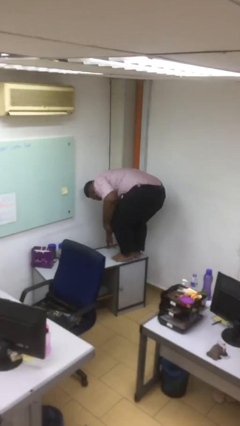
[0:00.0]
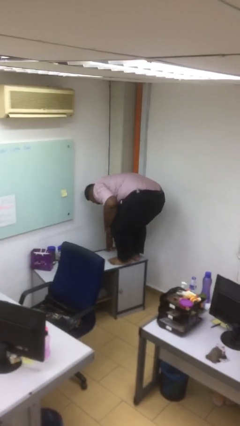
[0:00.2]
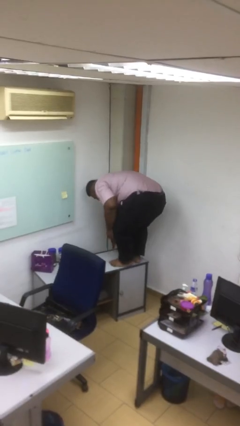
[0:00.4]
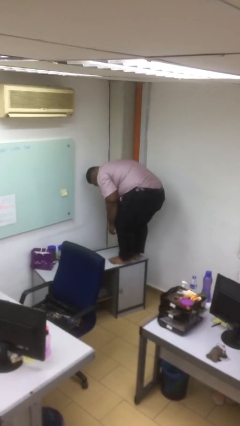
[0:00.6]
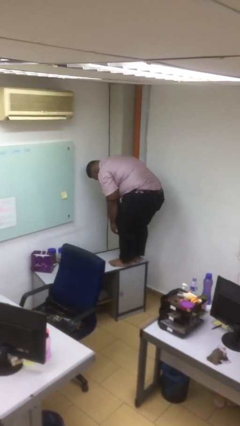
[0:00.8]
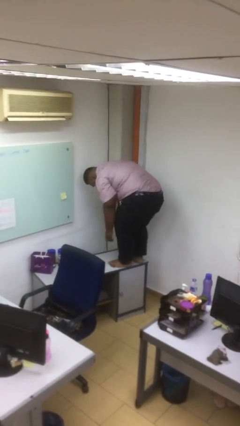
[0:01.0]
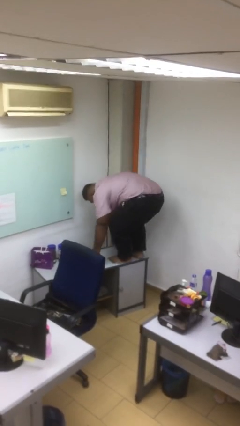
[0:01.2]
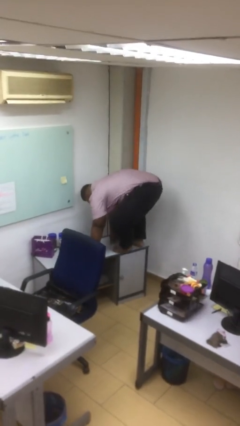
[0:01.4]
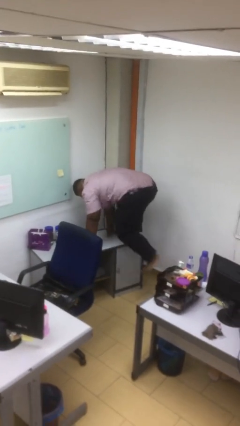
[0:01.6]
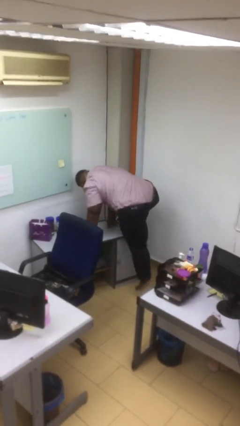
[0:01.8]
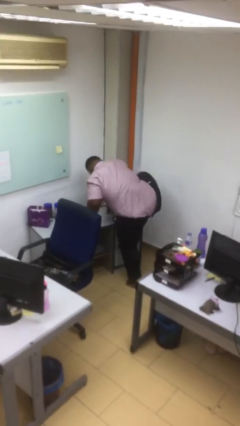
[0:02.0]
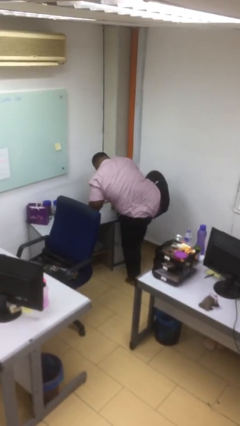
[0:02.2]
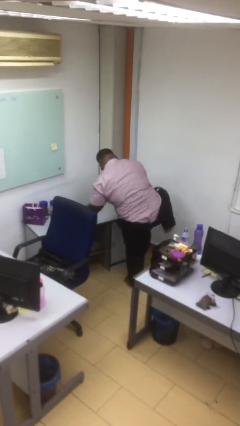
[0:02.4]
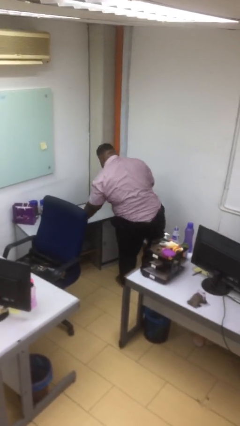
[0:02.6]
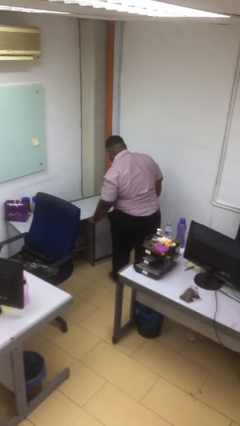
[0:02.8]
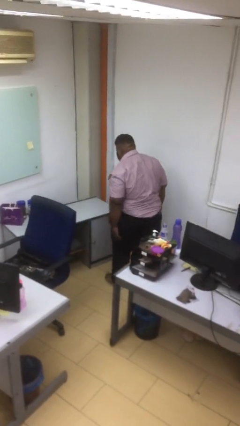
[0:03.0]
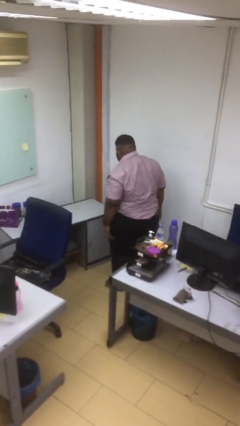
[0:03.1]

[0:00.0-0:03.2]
person climbs off table

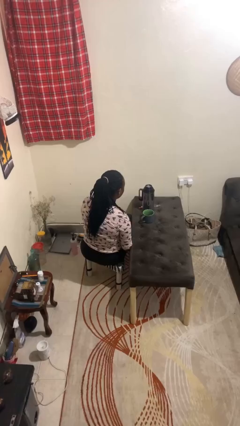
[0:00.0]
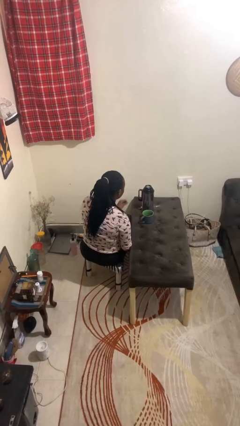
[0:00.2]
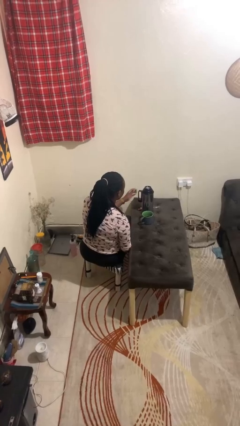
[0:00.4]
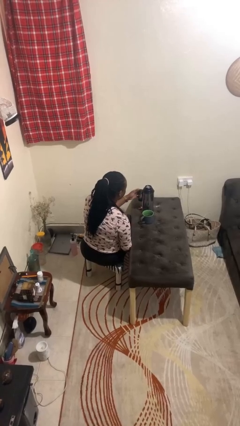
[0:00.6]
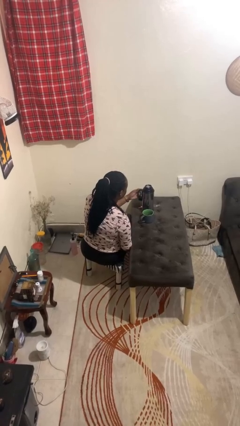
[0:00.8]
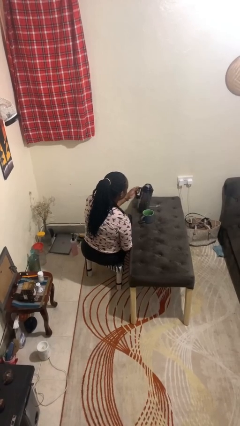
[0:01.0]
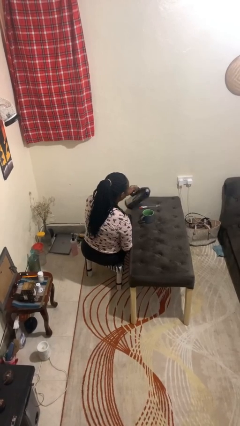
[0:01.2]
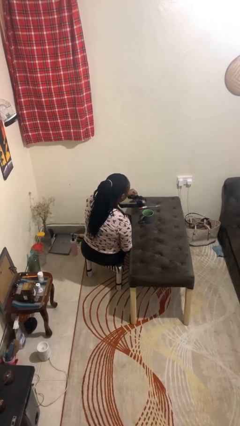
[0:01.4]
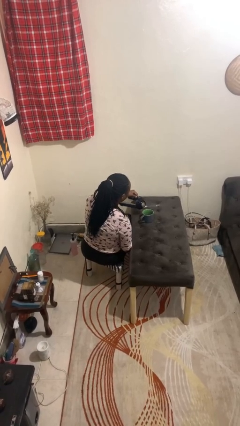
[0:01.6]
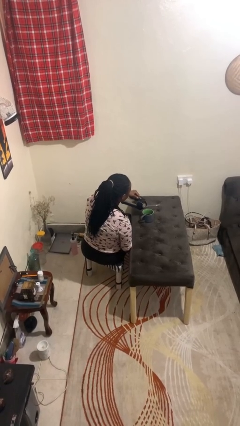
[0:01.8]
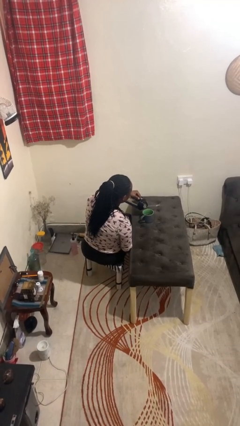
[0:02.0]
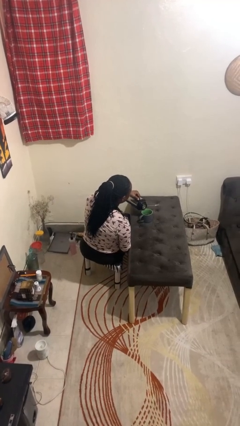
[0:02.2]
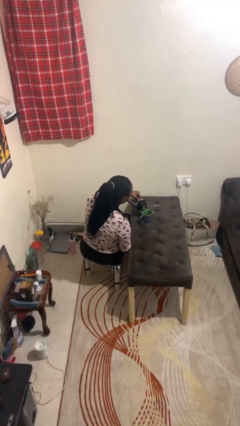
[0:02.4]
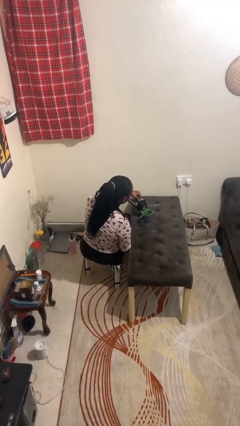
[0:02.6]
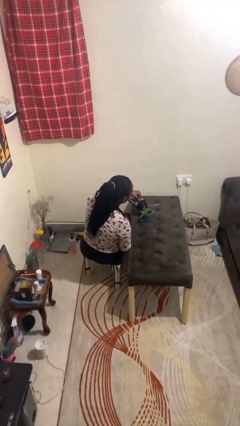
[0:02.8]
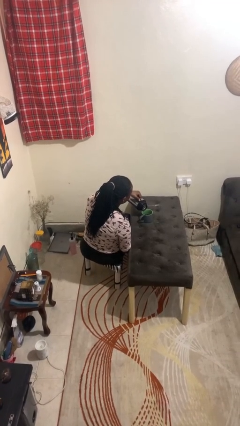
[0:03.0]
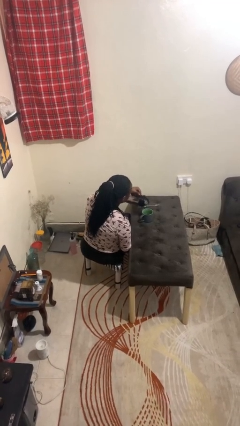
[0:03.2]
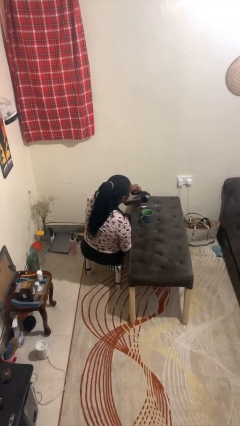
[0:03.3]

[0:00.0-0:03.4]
person pours coffee into mug

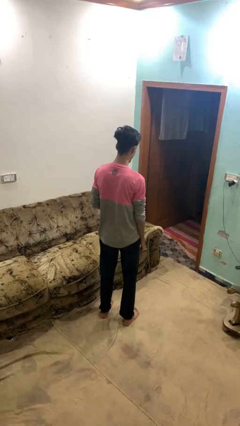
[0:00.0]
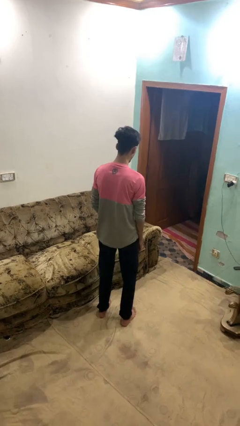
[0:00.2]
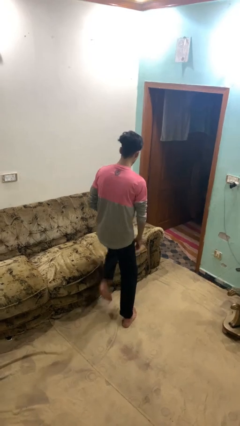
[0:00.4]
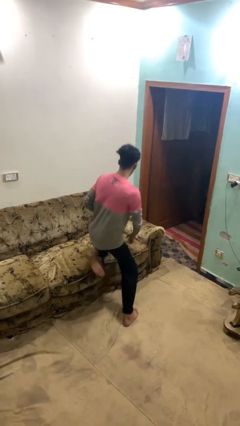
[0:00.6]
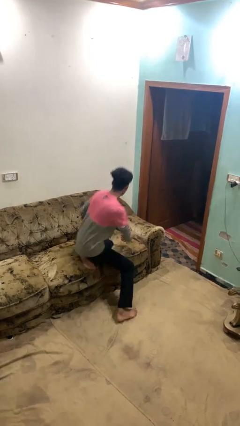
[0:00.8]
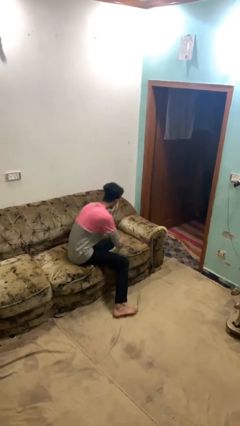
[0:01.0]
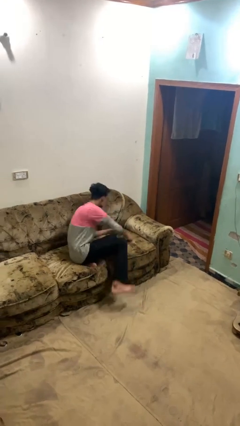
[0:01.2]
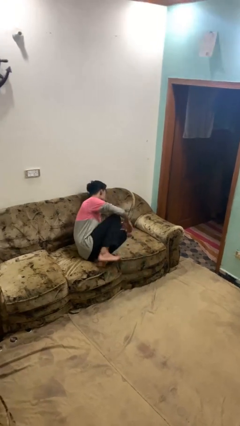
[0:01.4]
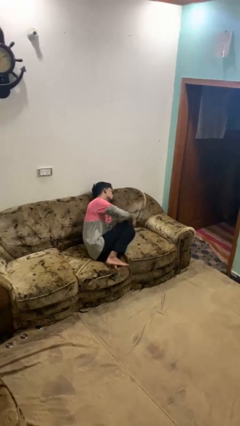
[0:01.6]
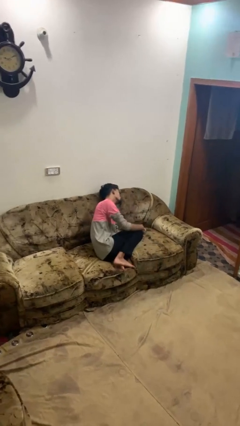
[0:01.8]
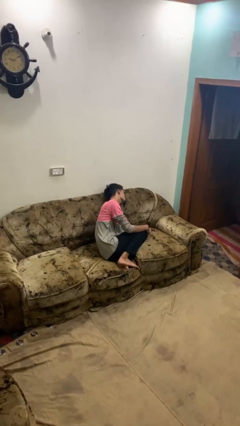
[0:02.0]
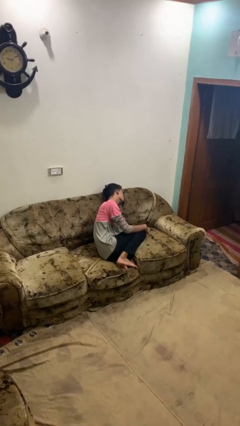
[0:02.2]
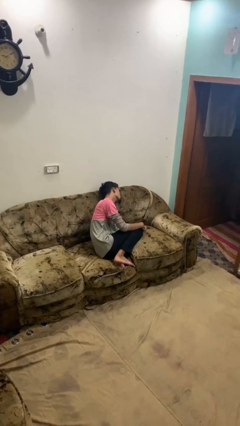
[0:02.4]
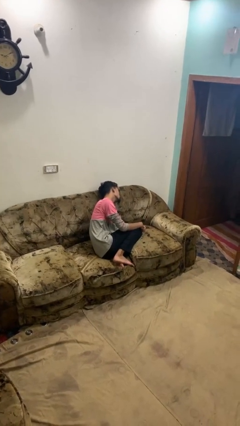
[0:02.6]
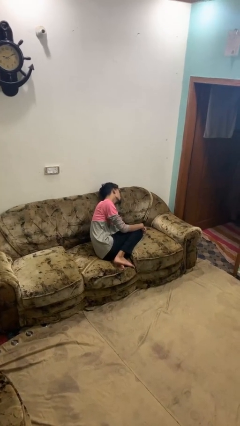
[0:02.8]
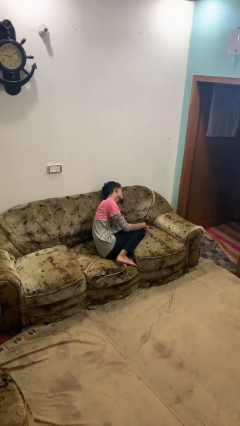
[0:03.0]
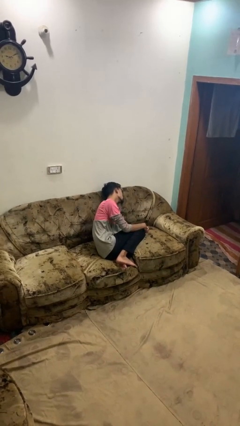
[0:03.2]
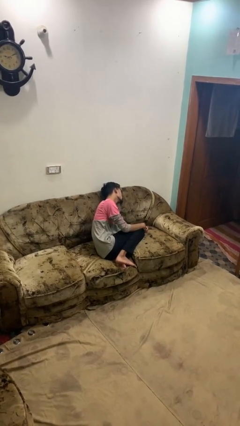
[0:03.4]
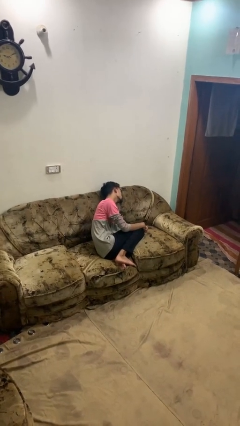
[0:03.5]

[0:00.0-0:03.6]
person lies down on couch

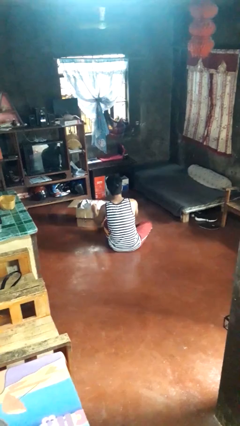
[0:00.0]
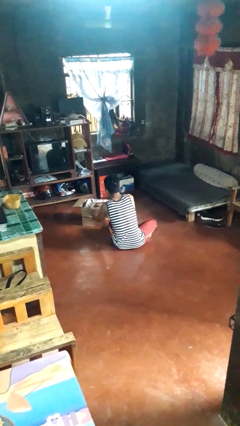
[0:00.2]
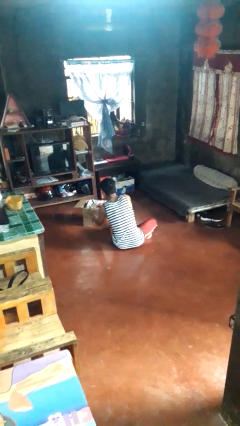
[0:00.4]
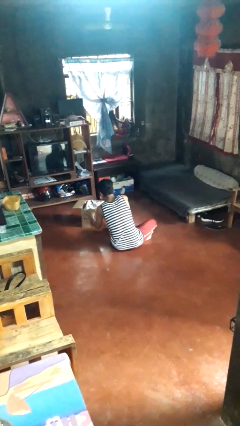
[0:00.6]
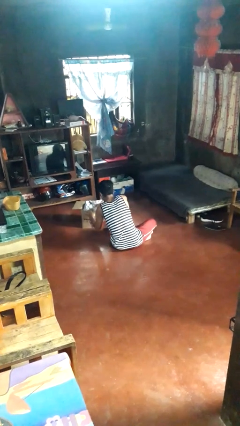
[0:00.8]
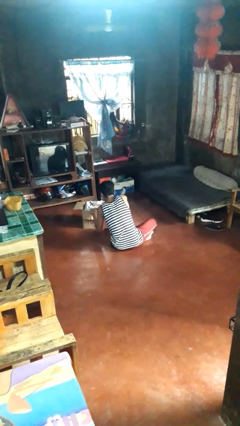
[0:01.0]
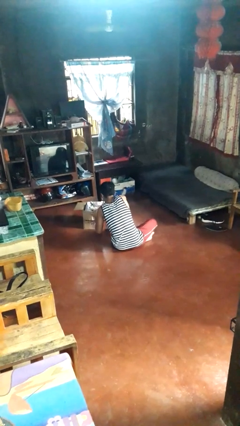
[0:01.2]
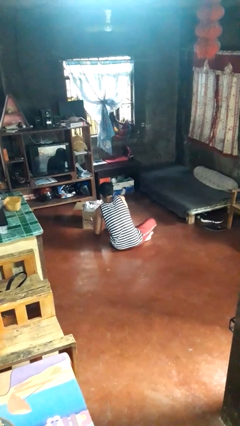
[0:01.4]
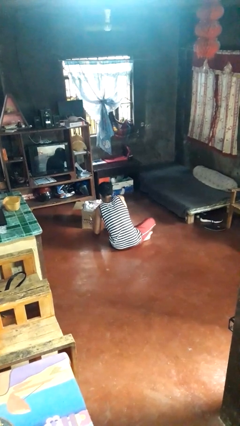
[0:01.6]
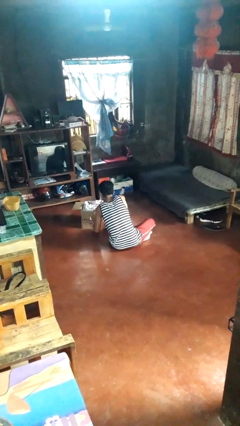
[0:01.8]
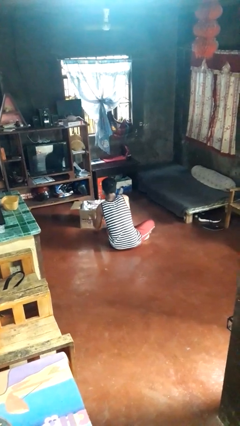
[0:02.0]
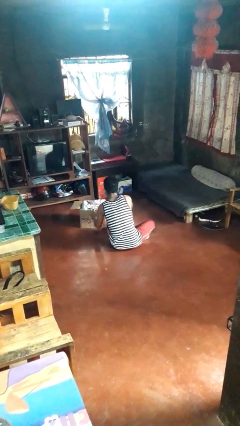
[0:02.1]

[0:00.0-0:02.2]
person searches in box

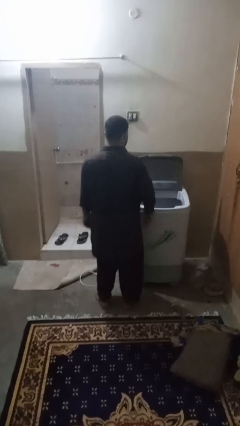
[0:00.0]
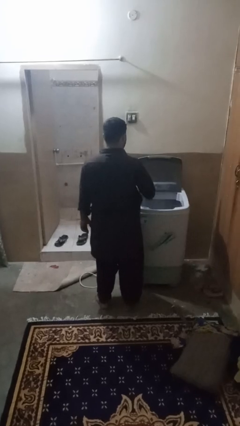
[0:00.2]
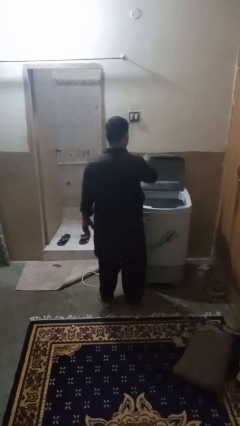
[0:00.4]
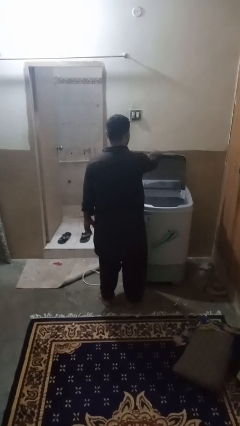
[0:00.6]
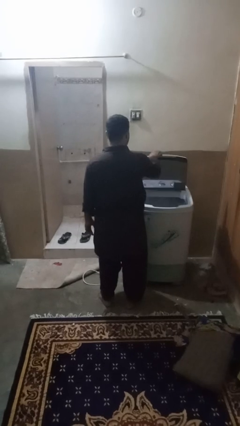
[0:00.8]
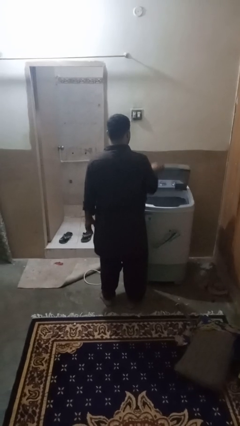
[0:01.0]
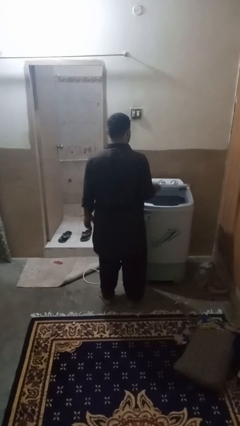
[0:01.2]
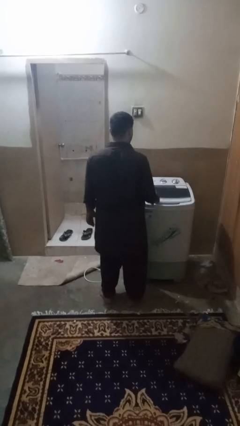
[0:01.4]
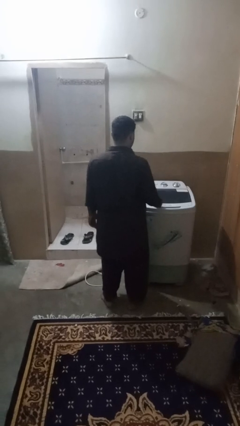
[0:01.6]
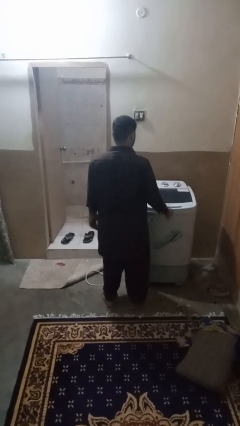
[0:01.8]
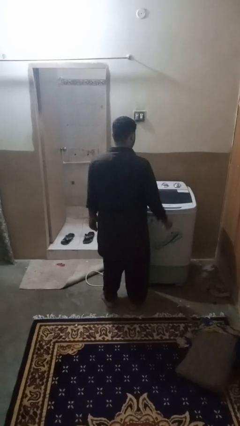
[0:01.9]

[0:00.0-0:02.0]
person closes clothes washer

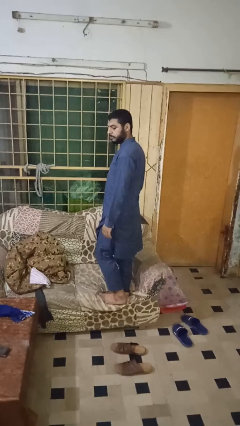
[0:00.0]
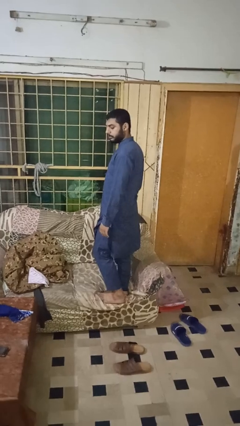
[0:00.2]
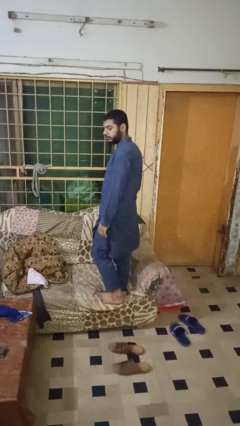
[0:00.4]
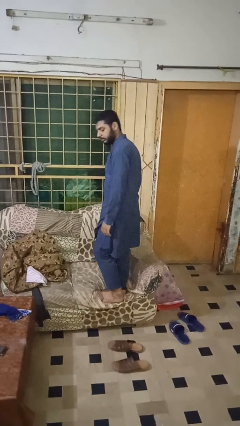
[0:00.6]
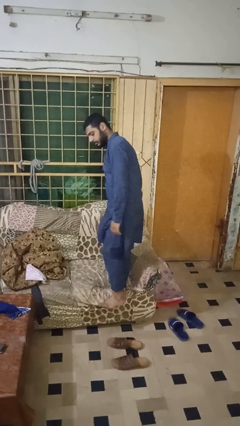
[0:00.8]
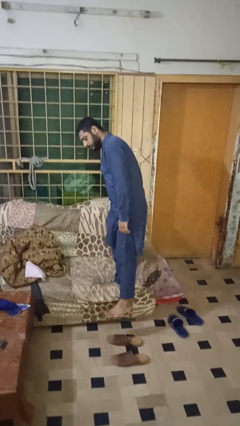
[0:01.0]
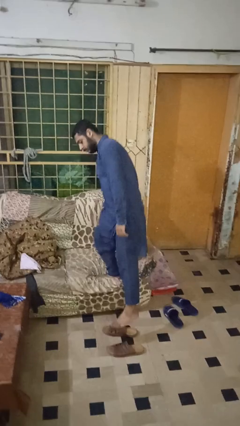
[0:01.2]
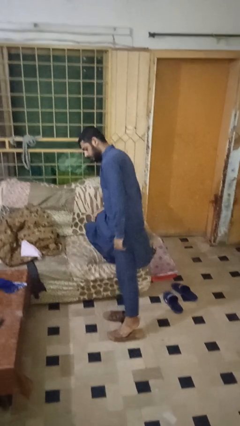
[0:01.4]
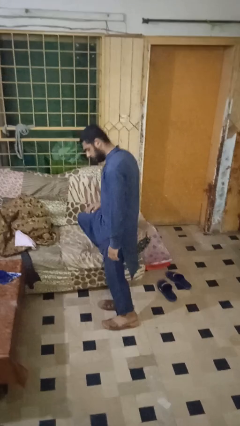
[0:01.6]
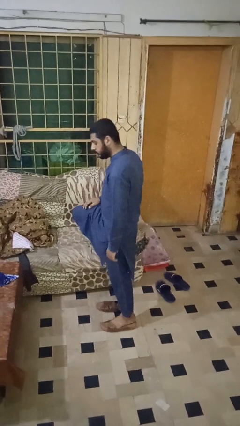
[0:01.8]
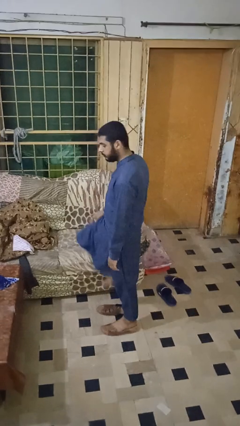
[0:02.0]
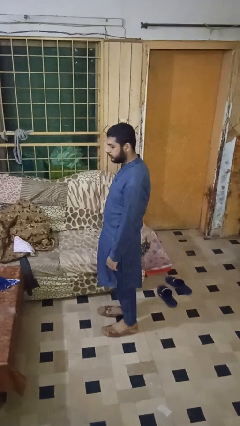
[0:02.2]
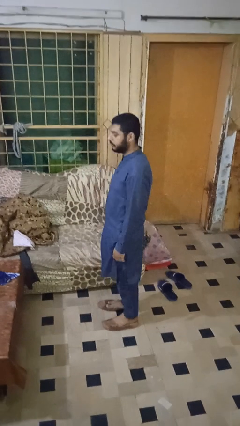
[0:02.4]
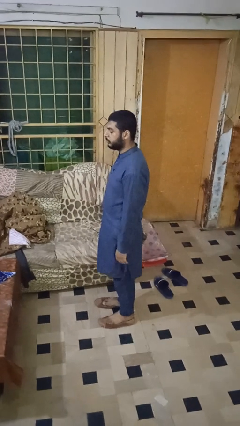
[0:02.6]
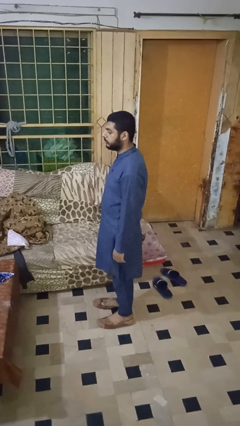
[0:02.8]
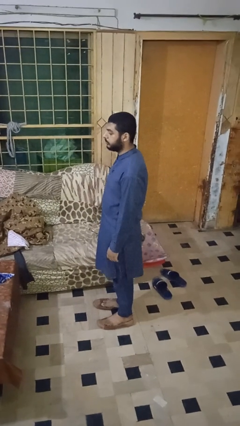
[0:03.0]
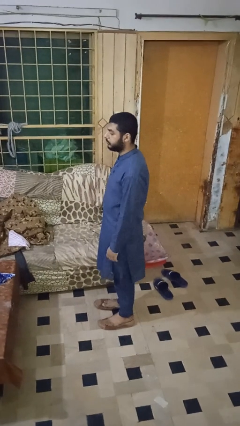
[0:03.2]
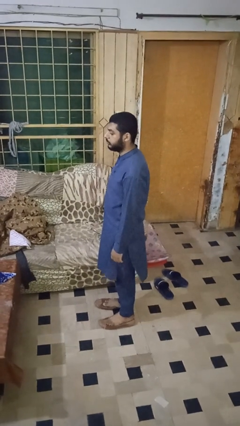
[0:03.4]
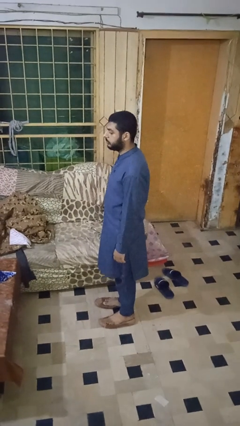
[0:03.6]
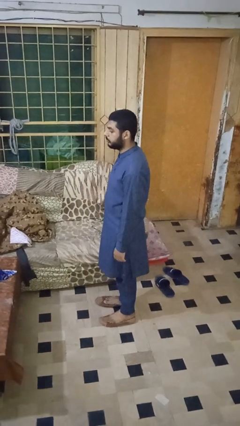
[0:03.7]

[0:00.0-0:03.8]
person climbs off couch
